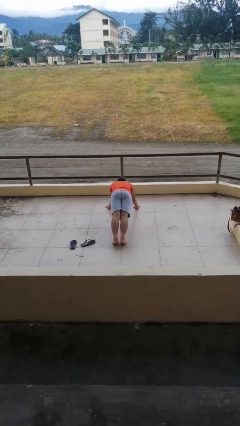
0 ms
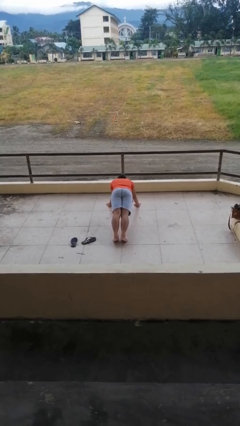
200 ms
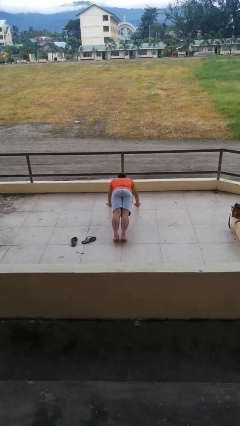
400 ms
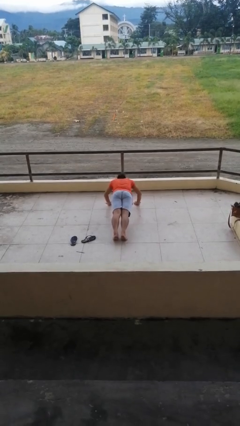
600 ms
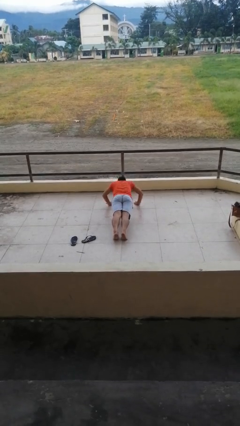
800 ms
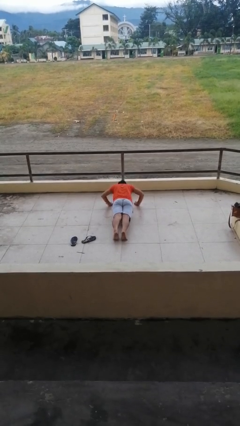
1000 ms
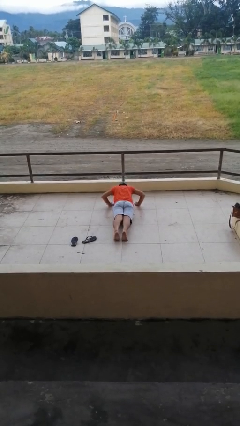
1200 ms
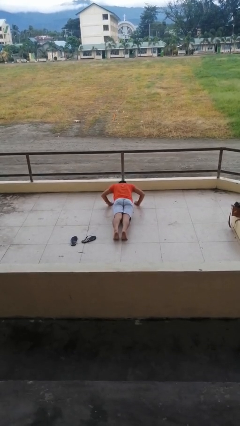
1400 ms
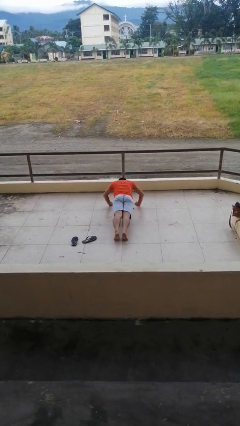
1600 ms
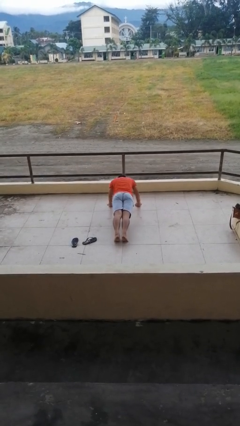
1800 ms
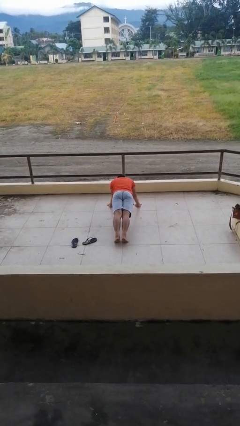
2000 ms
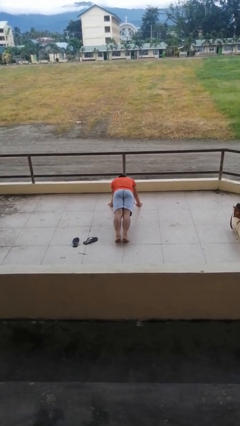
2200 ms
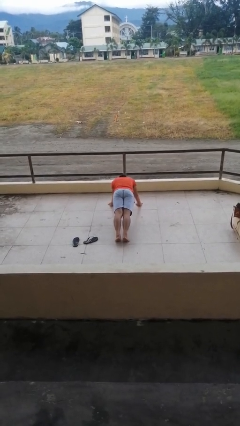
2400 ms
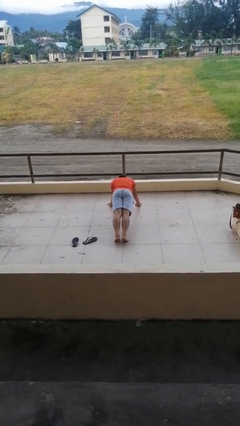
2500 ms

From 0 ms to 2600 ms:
person exercises with pushup

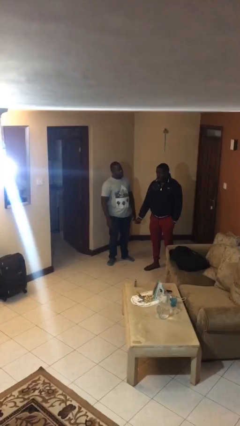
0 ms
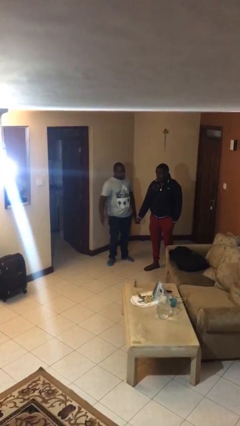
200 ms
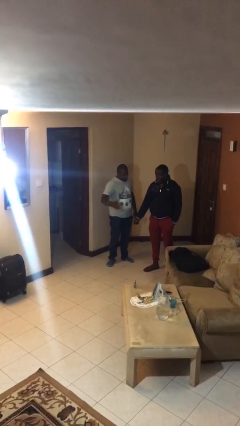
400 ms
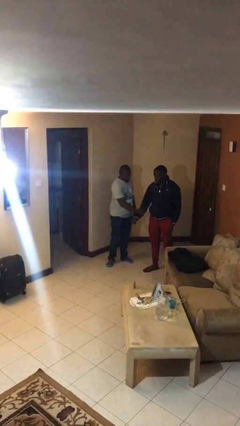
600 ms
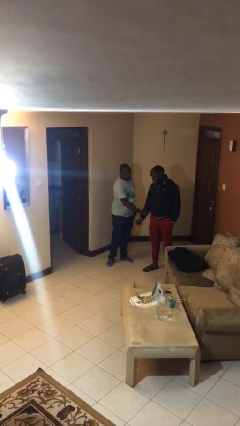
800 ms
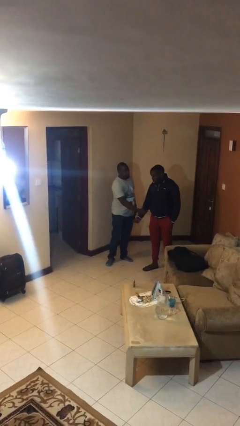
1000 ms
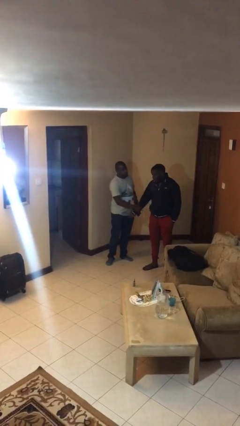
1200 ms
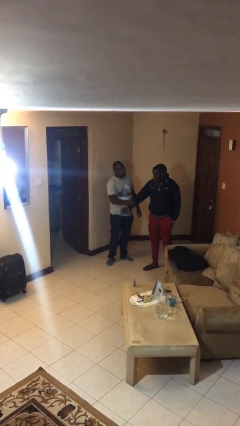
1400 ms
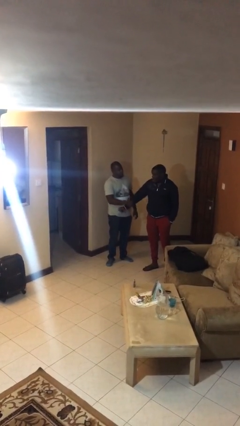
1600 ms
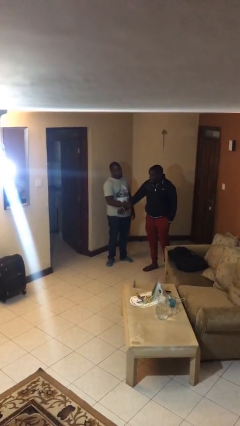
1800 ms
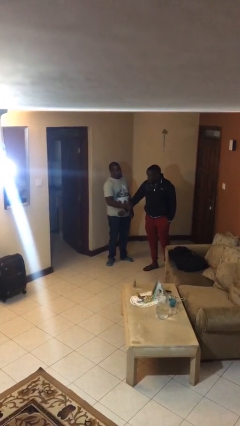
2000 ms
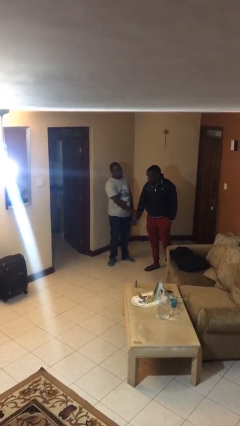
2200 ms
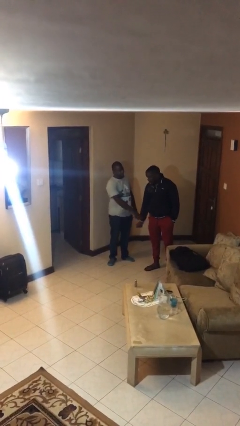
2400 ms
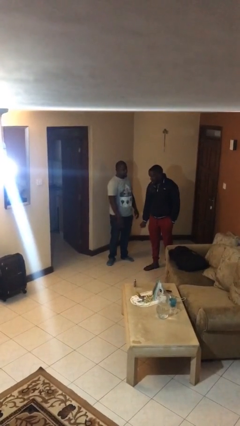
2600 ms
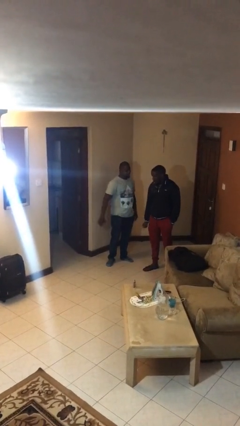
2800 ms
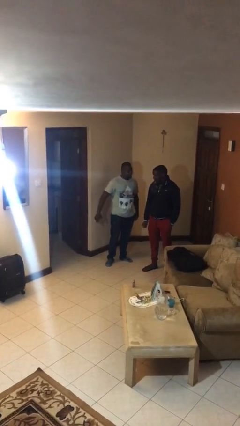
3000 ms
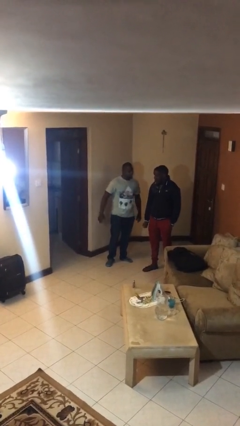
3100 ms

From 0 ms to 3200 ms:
person grabs person by forearm

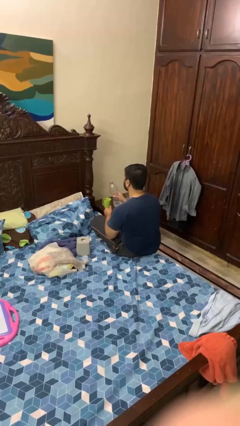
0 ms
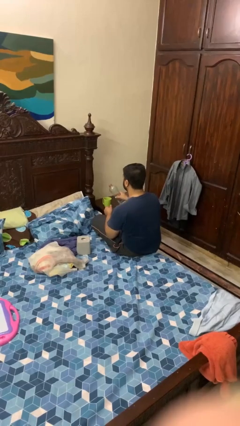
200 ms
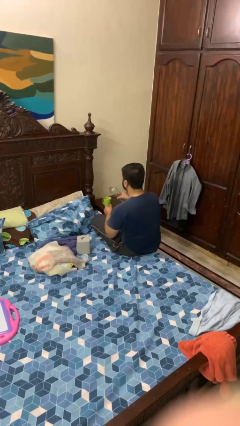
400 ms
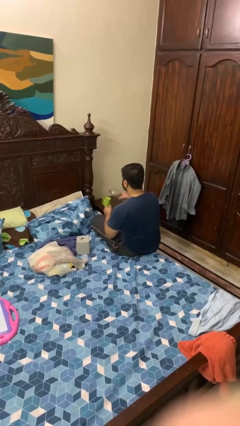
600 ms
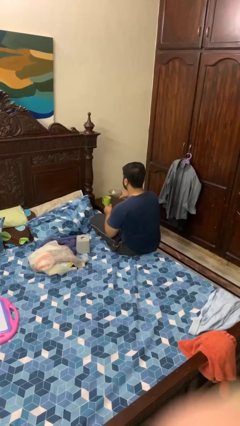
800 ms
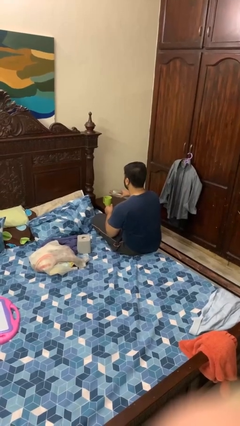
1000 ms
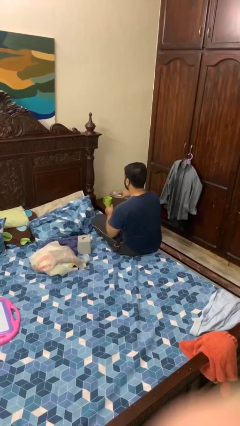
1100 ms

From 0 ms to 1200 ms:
person pours liquid into cup

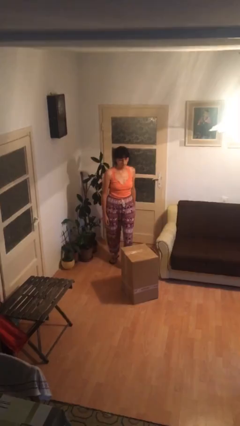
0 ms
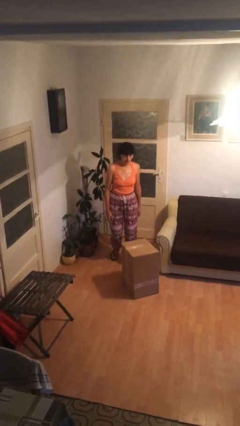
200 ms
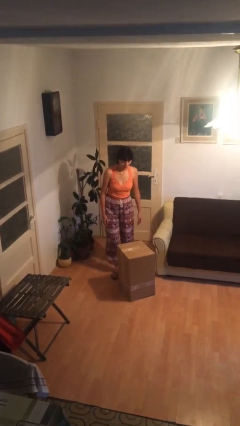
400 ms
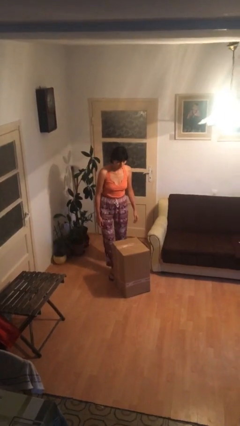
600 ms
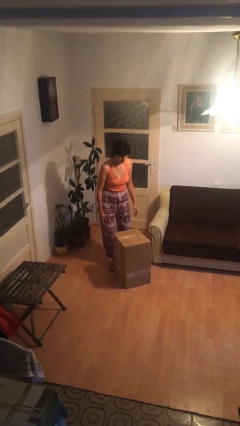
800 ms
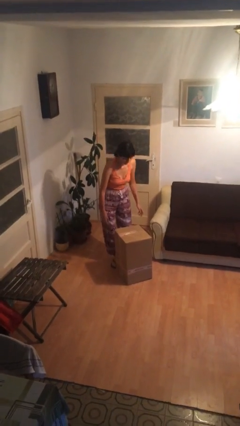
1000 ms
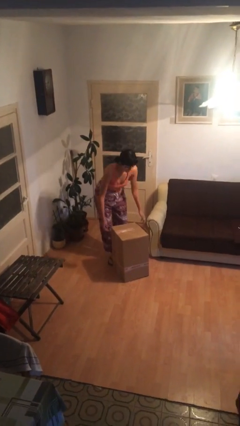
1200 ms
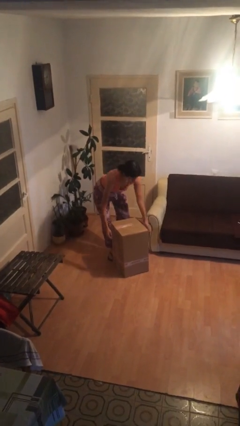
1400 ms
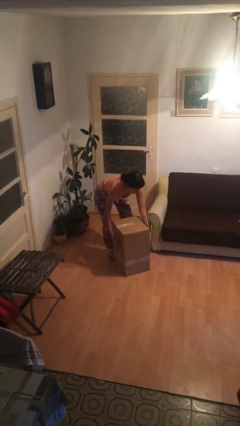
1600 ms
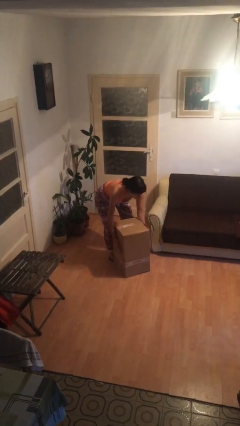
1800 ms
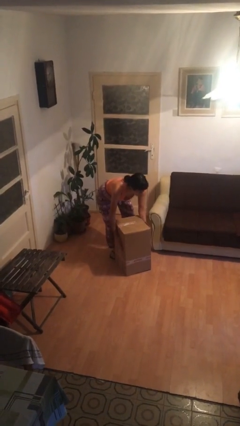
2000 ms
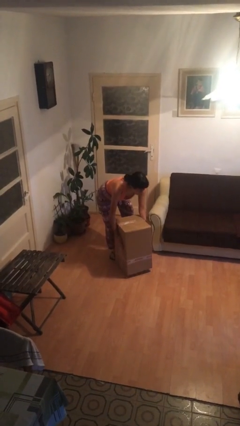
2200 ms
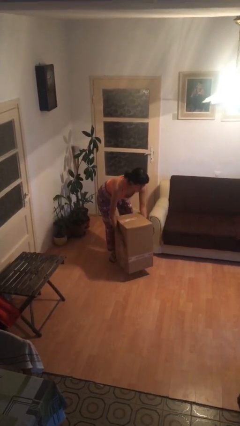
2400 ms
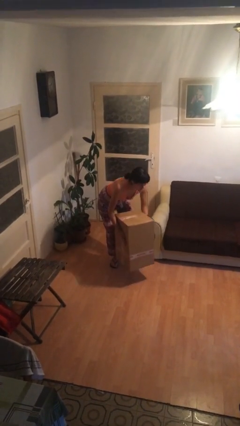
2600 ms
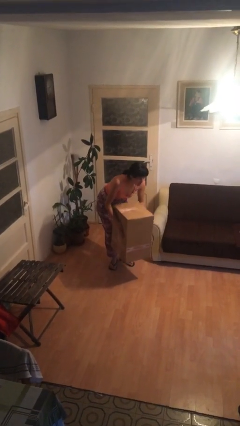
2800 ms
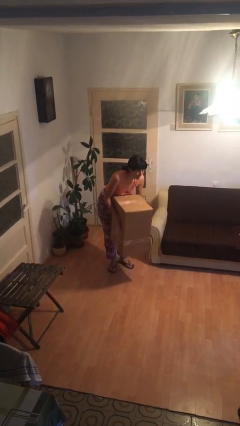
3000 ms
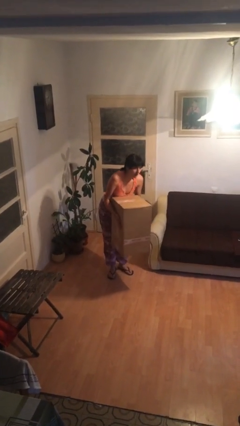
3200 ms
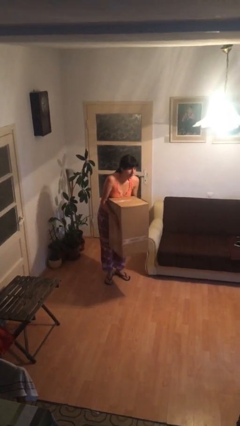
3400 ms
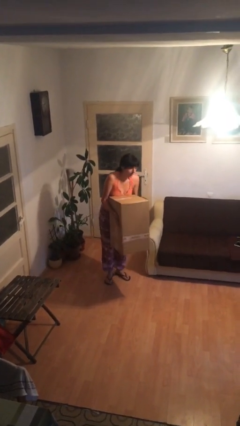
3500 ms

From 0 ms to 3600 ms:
person picks up object from floor

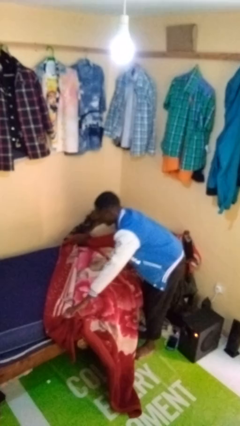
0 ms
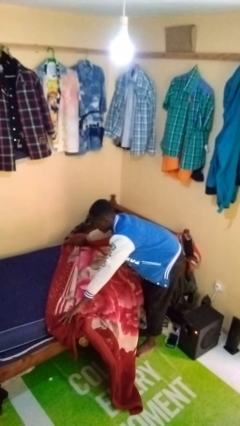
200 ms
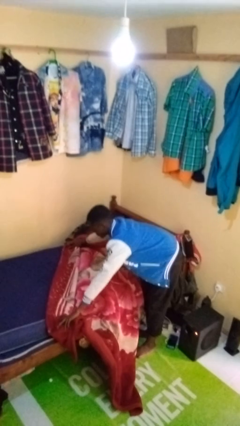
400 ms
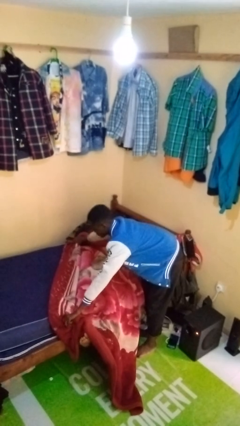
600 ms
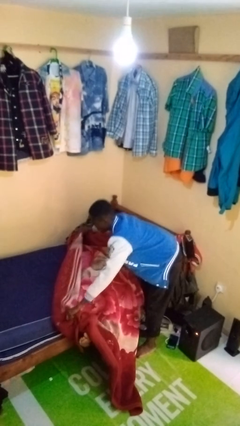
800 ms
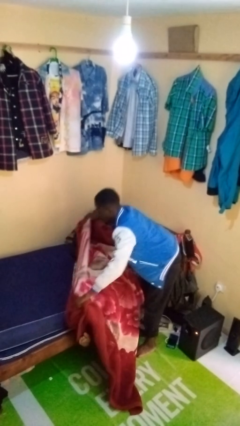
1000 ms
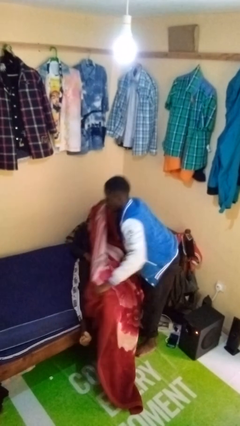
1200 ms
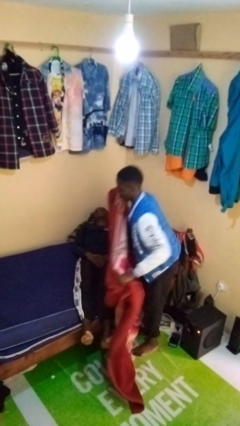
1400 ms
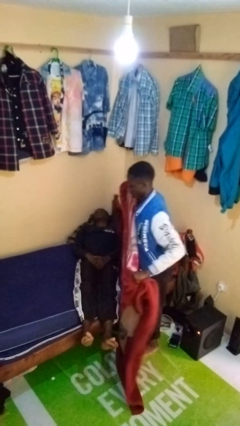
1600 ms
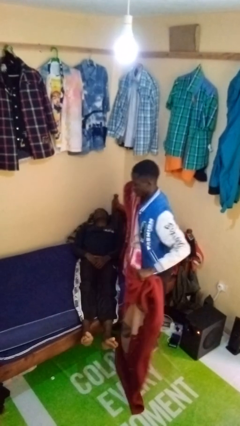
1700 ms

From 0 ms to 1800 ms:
person uncovers friend with blanket

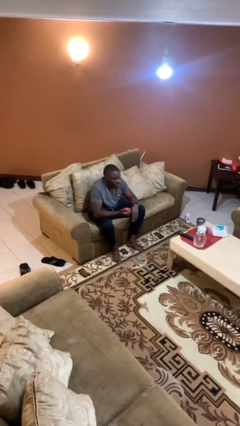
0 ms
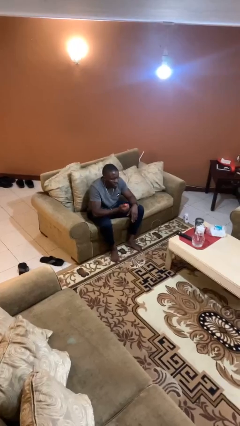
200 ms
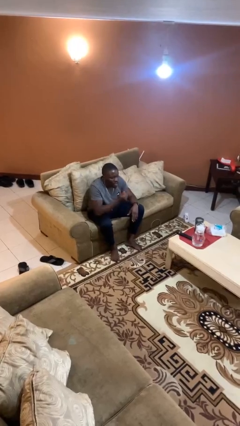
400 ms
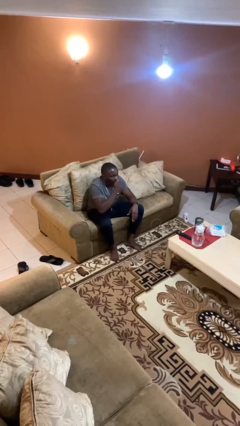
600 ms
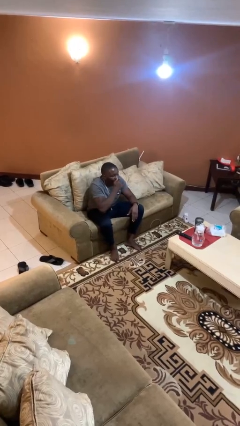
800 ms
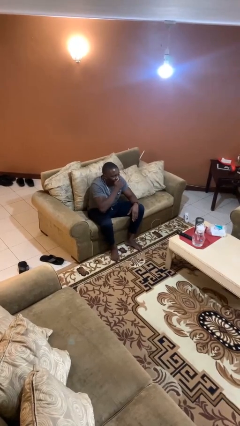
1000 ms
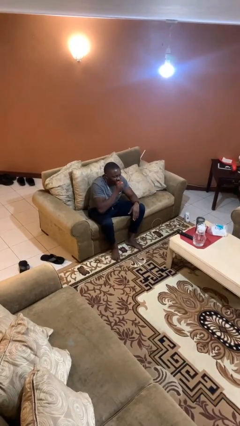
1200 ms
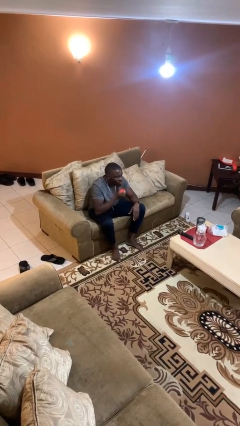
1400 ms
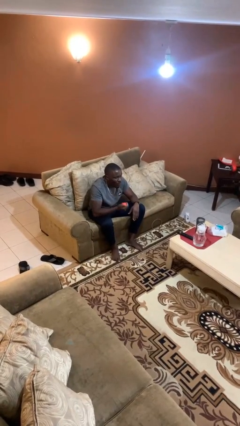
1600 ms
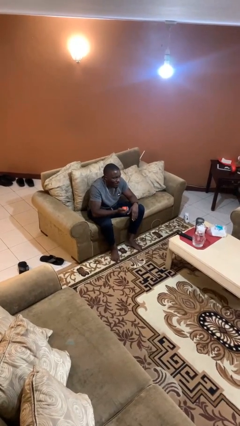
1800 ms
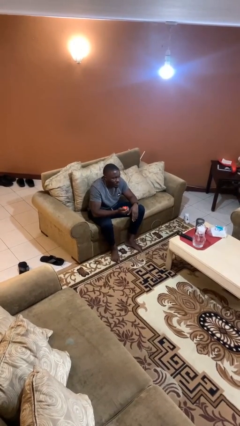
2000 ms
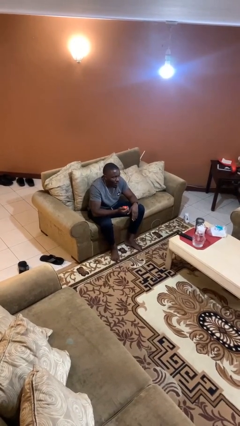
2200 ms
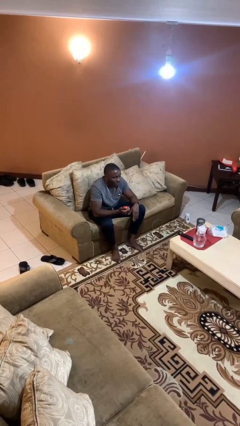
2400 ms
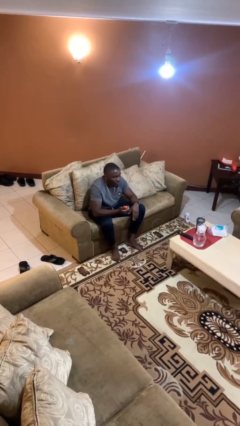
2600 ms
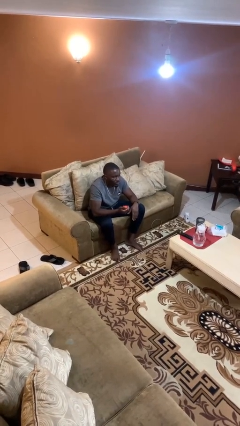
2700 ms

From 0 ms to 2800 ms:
person eats apple

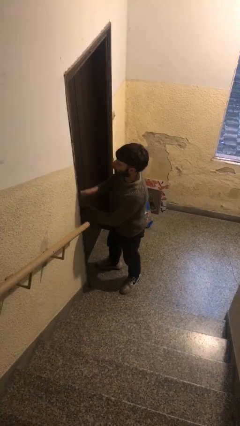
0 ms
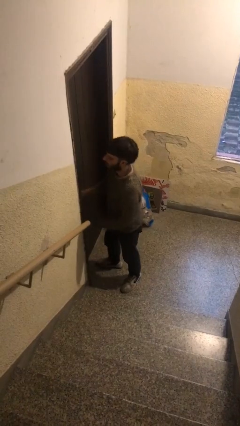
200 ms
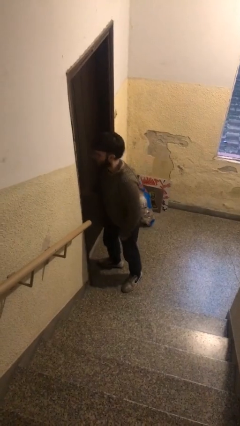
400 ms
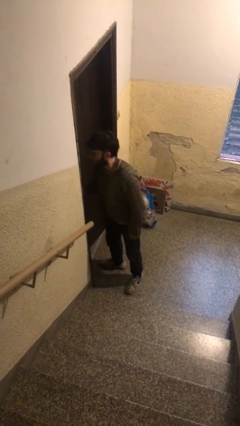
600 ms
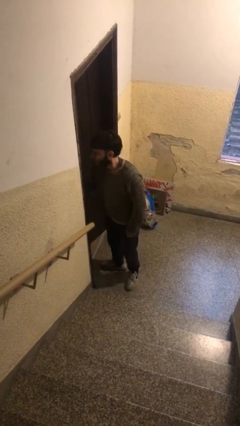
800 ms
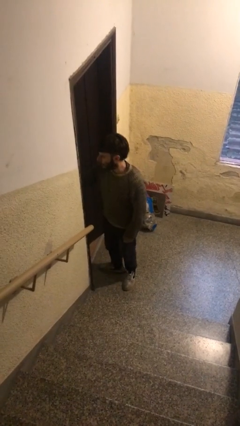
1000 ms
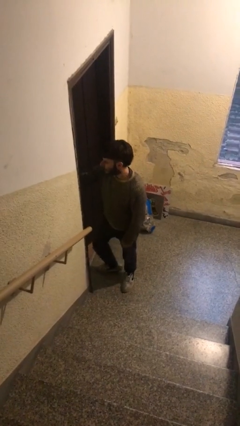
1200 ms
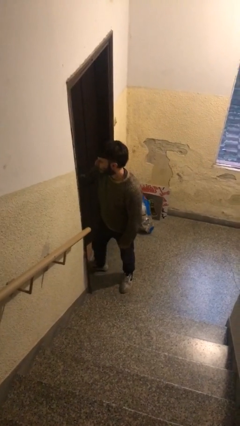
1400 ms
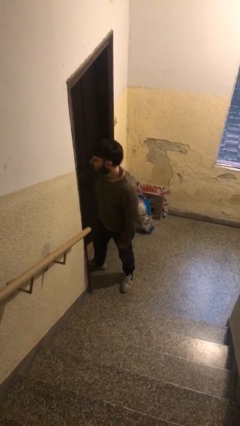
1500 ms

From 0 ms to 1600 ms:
person opens facility door

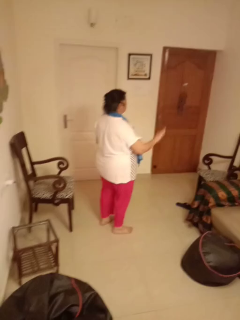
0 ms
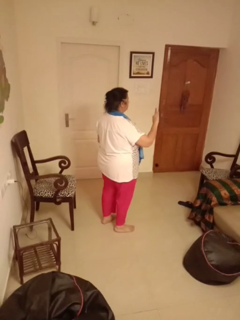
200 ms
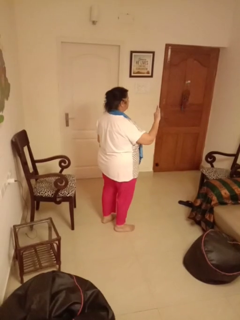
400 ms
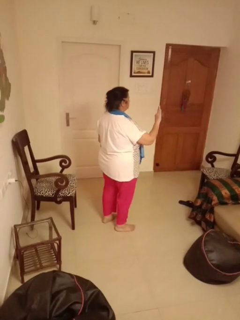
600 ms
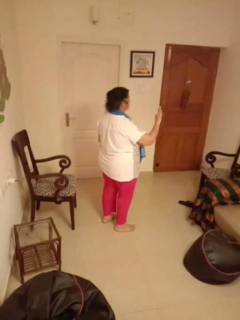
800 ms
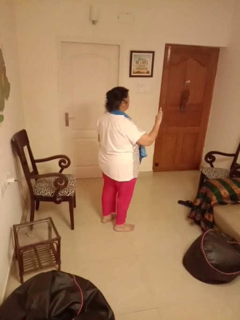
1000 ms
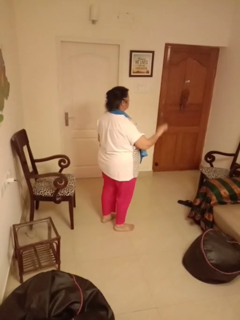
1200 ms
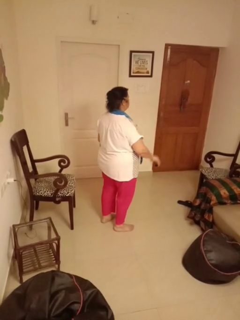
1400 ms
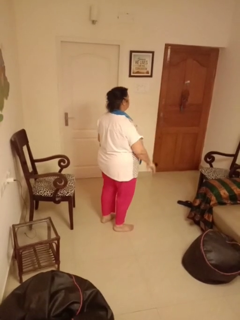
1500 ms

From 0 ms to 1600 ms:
person gestures number three
